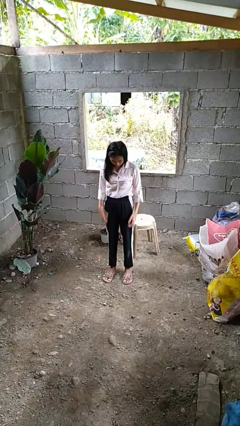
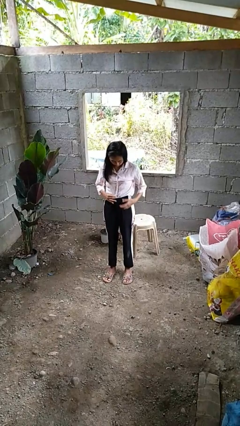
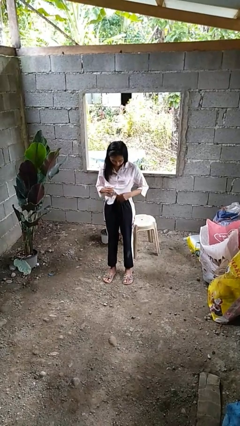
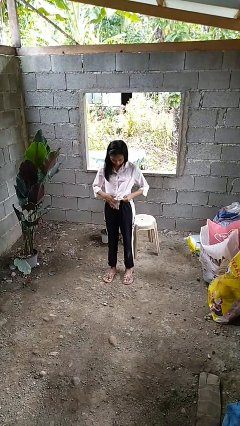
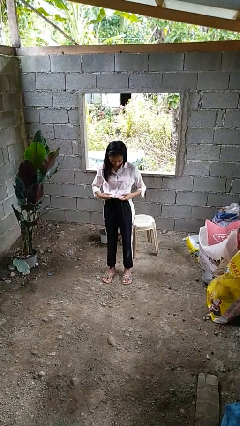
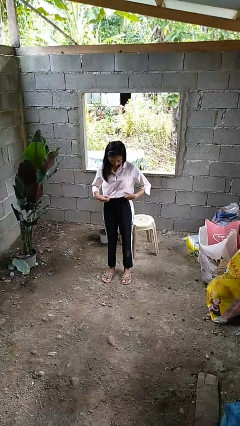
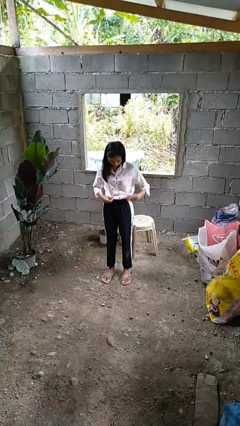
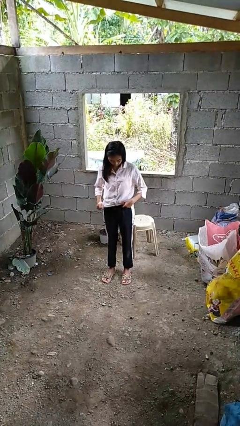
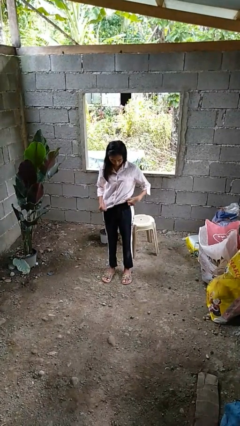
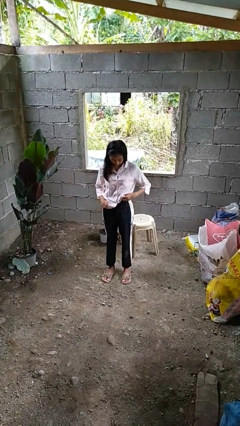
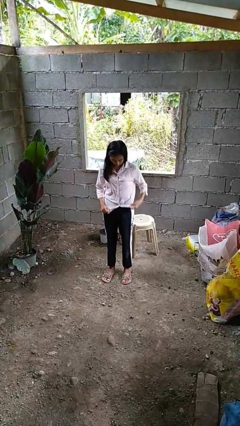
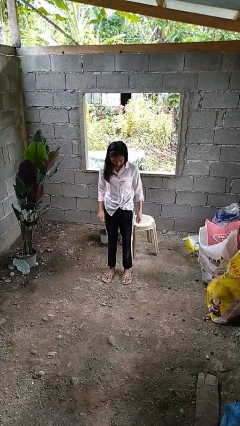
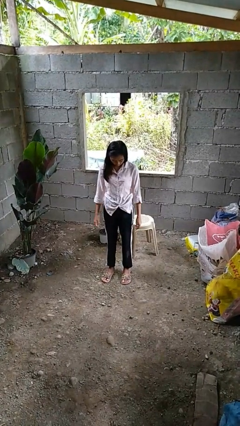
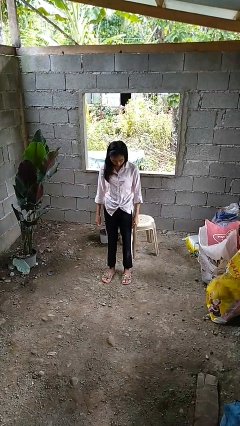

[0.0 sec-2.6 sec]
person untucks shirt

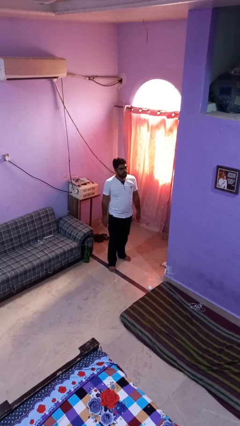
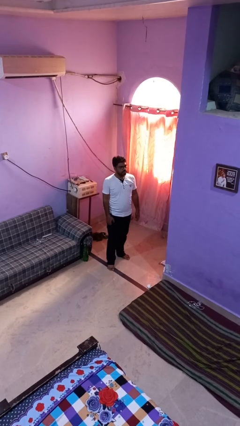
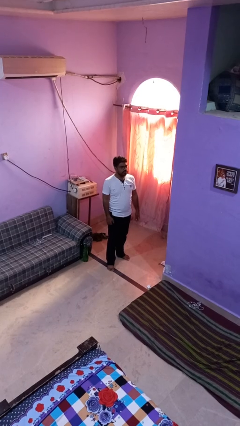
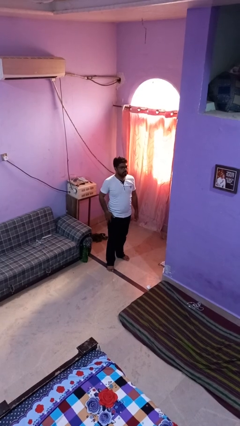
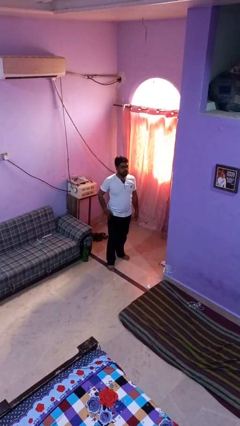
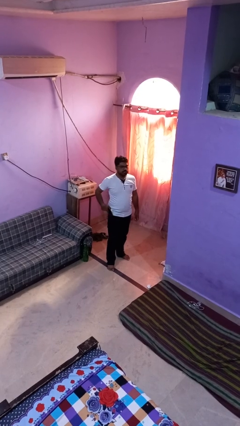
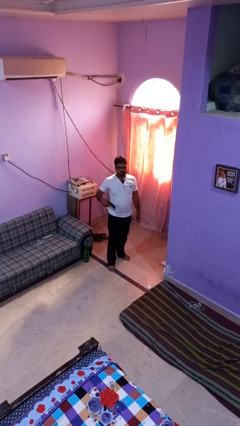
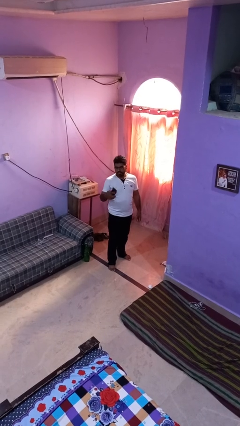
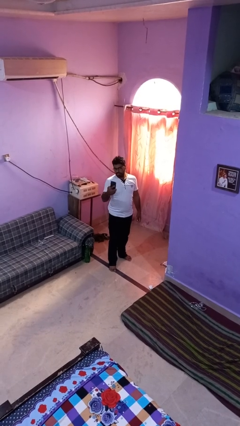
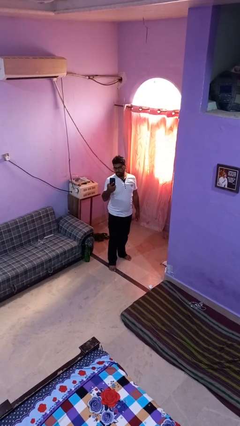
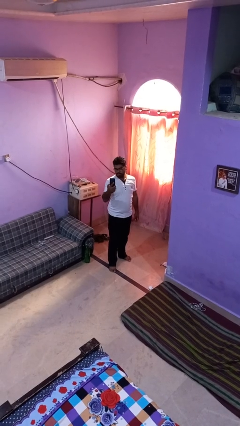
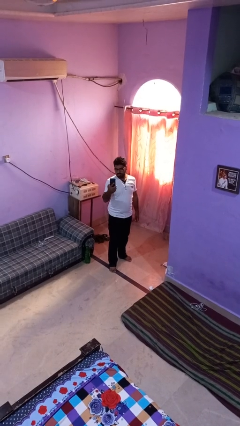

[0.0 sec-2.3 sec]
person takes phone from pocket

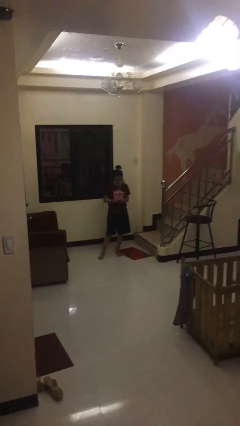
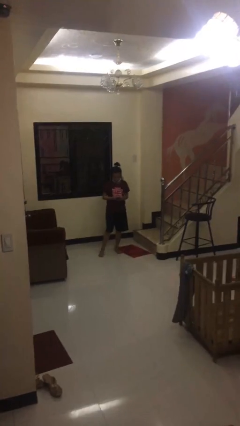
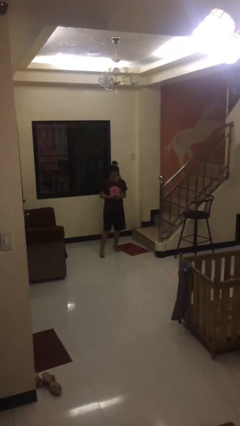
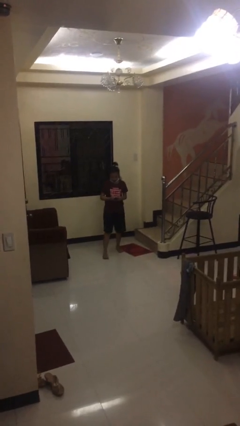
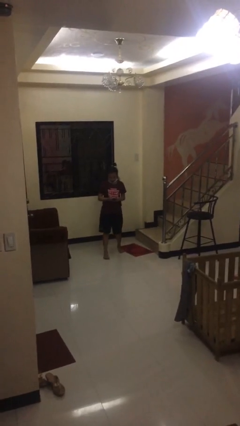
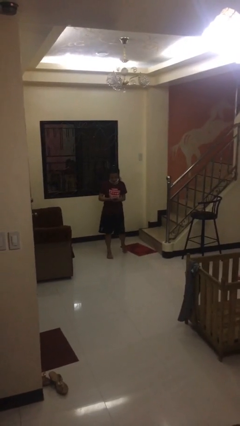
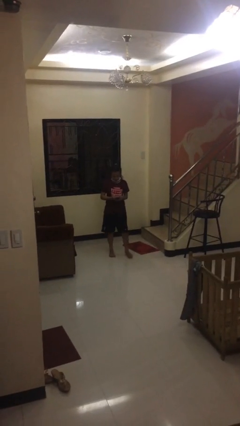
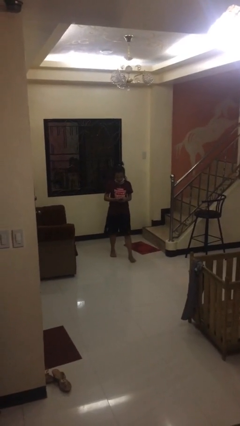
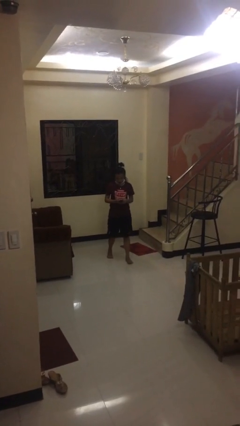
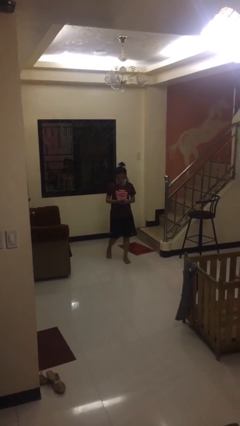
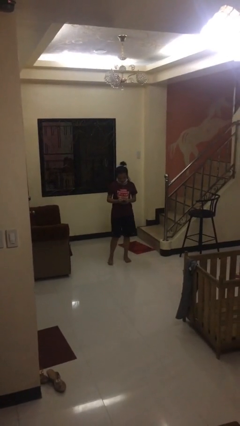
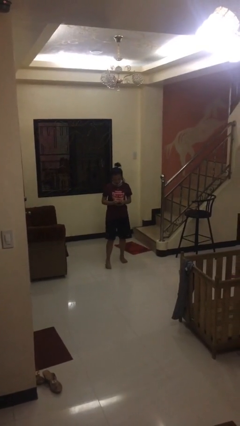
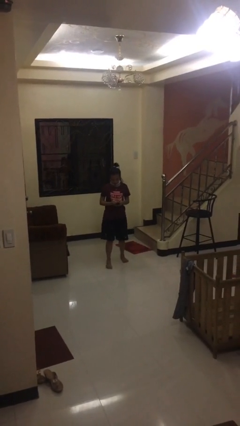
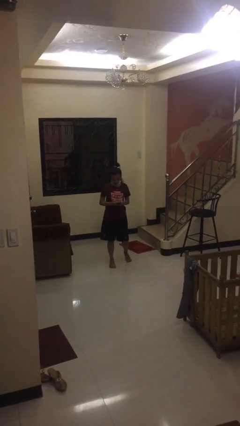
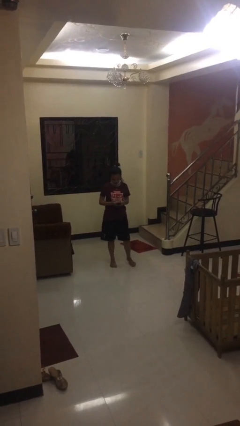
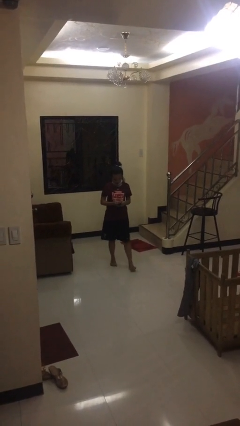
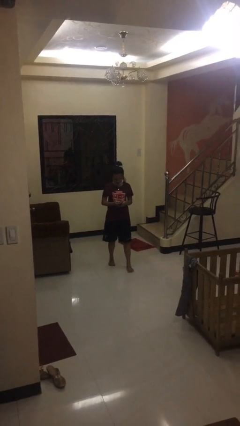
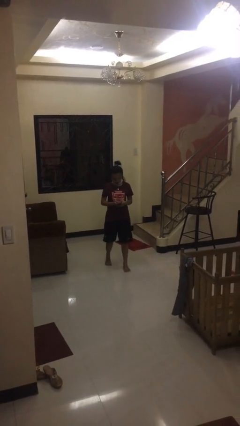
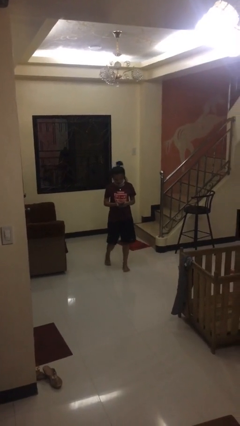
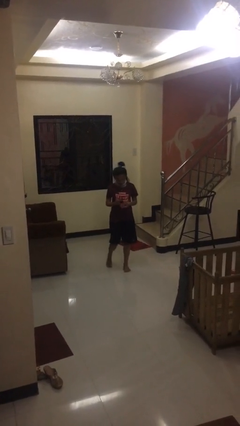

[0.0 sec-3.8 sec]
person texts on phone

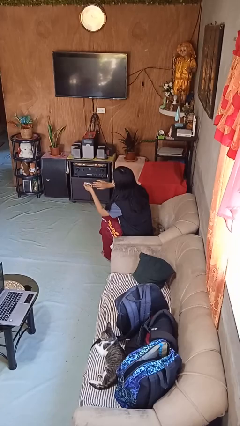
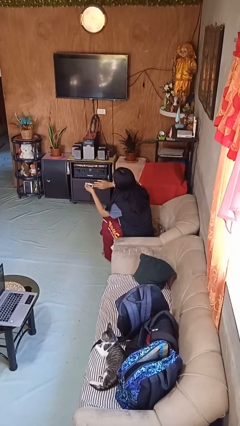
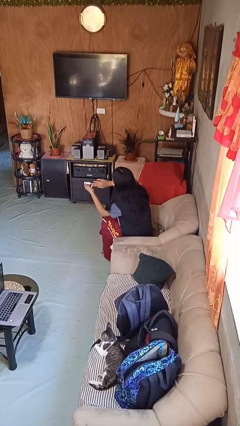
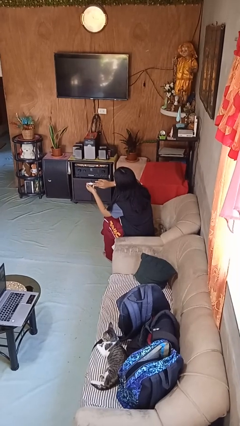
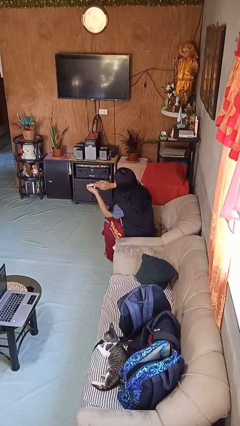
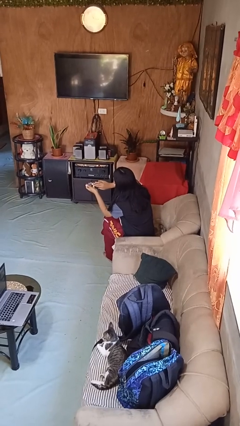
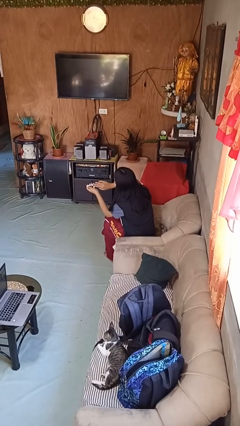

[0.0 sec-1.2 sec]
person clips fingernails

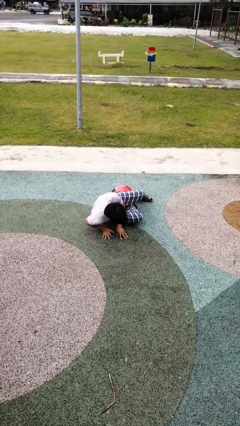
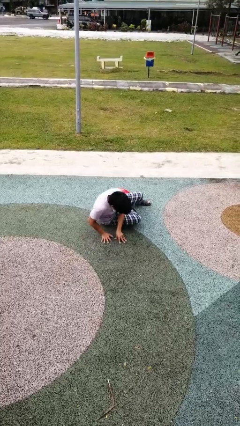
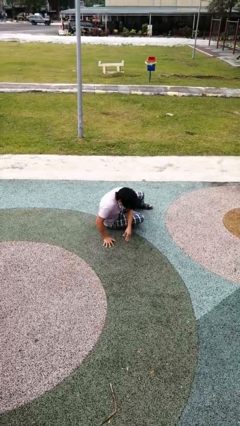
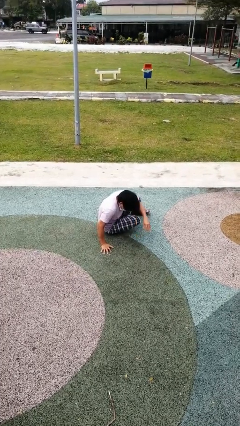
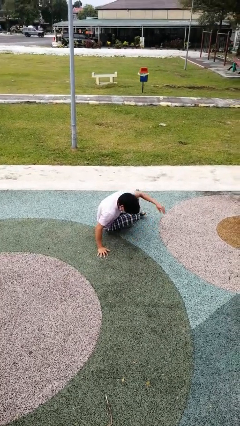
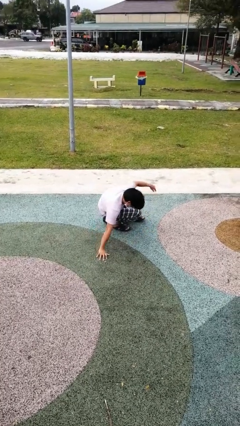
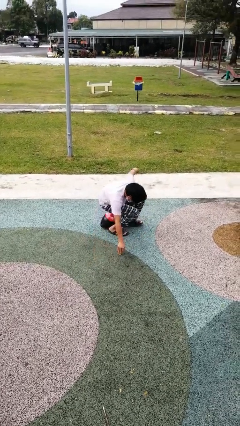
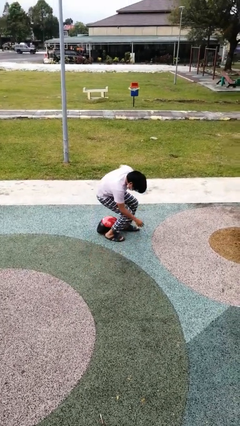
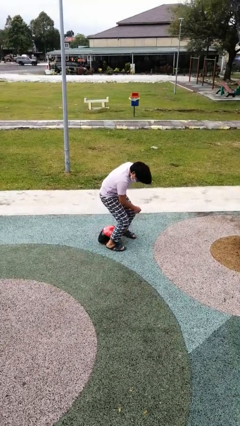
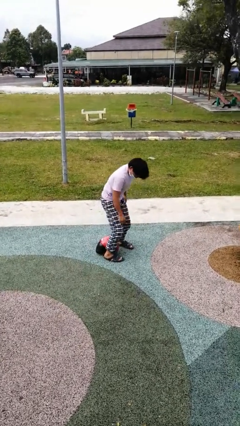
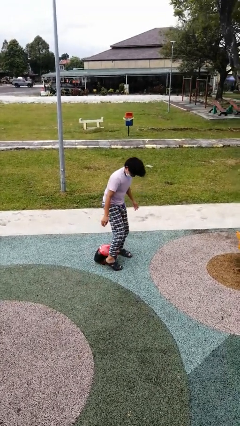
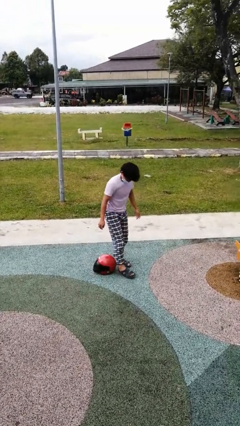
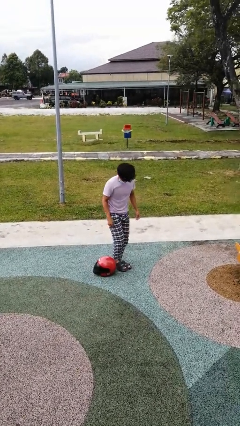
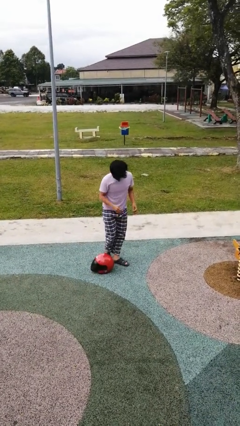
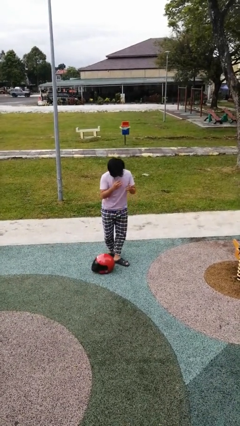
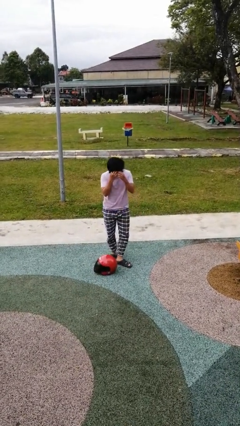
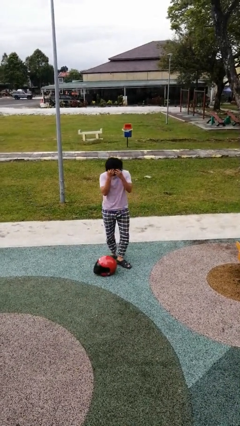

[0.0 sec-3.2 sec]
person stands up from floor

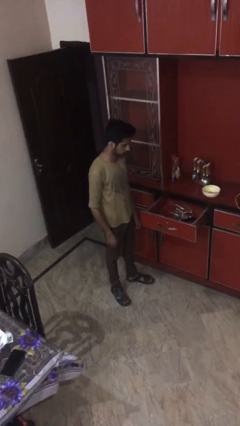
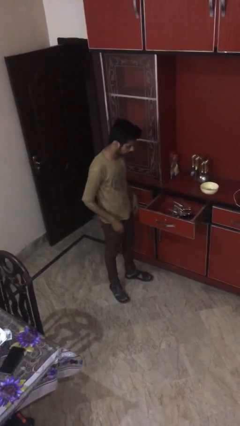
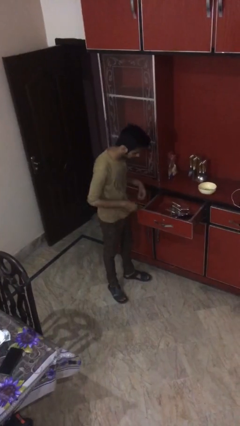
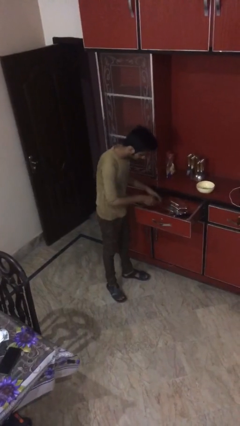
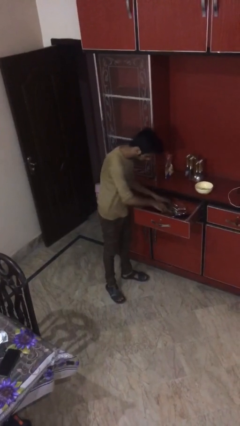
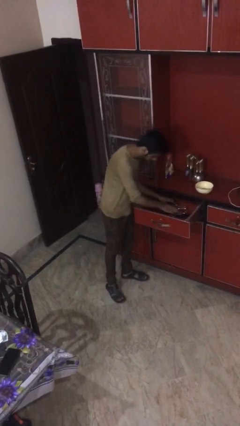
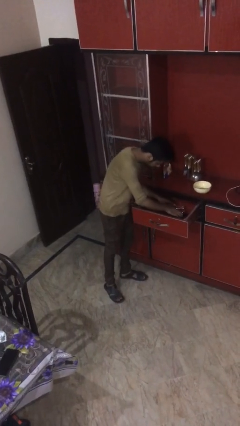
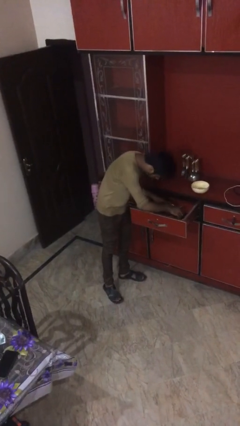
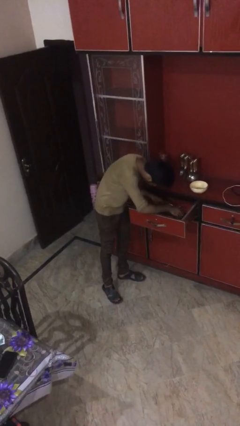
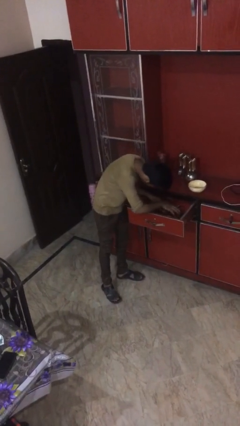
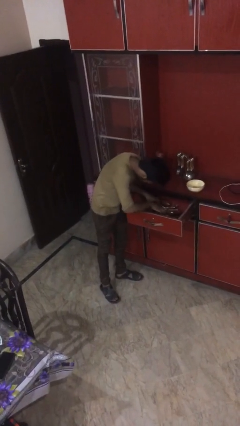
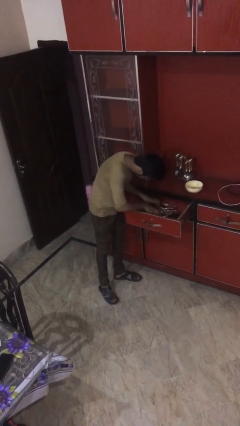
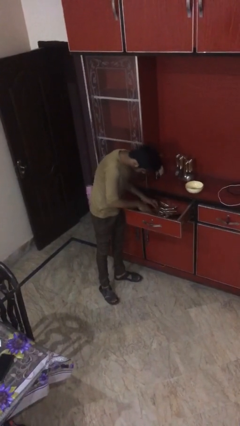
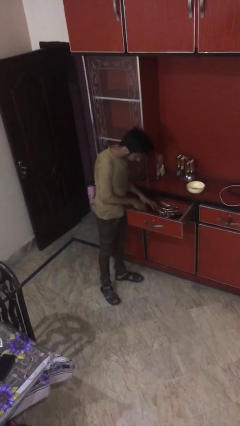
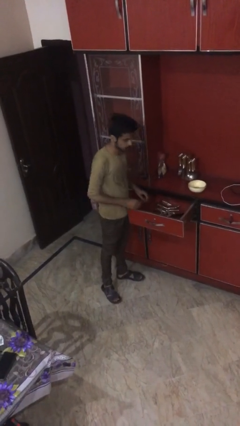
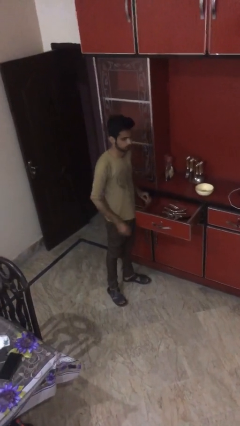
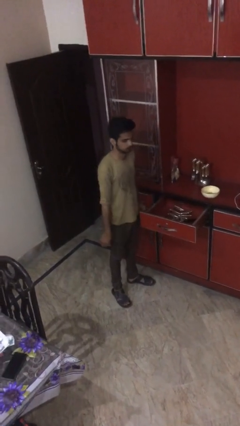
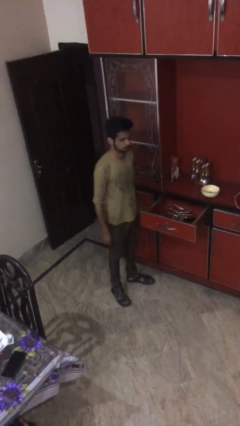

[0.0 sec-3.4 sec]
person searches in kitchen drawer

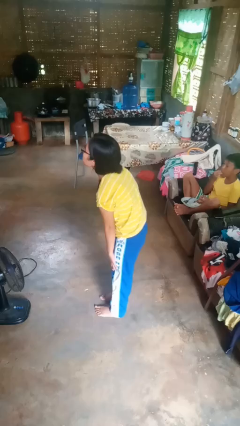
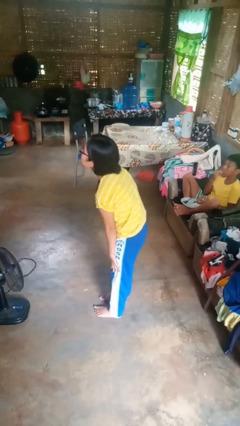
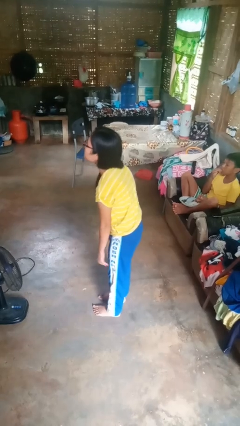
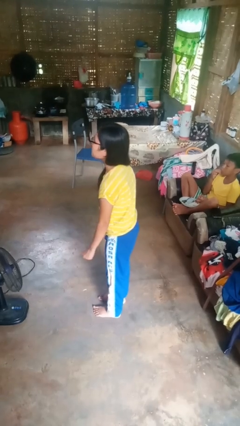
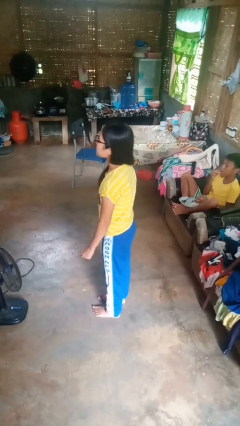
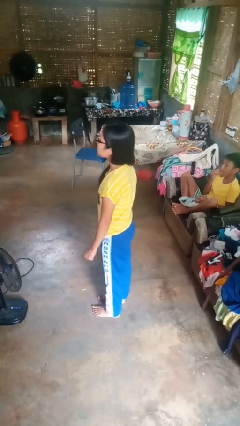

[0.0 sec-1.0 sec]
person slaps hands on thighs
